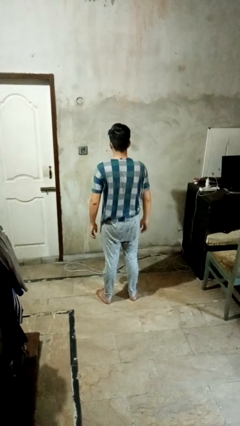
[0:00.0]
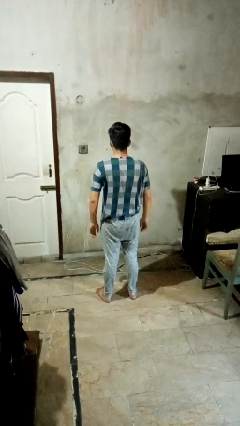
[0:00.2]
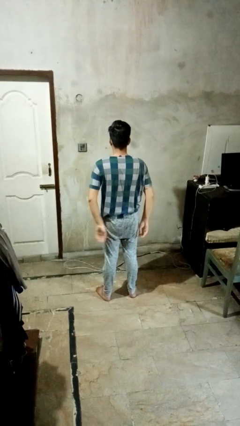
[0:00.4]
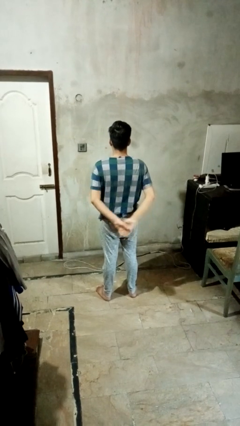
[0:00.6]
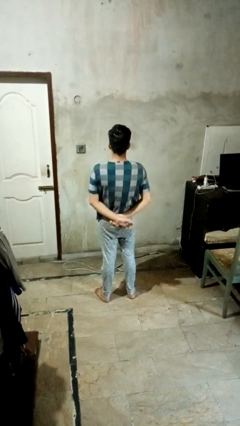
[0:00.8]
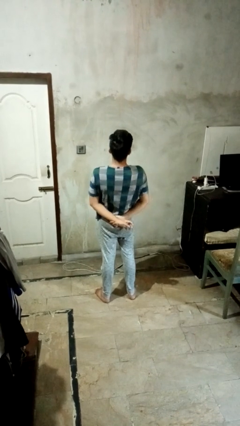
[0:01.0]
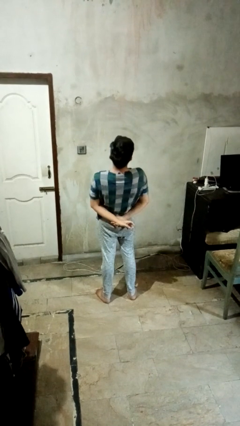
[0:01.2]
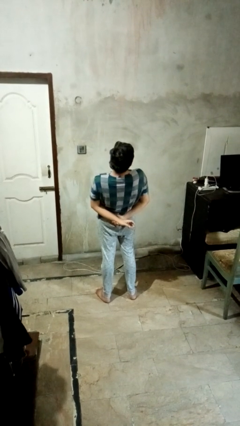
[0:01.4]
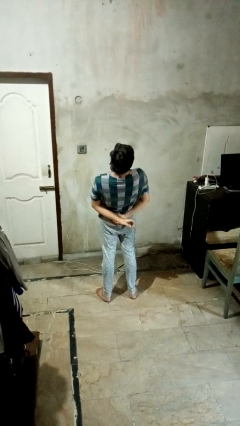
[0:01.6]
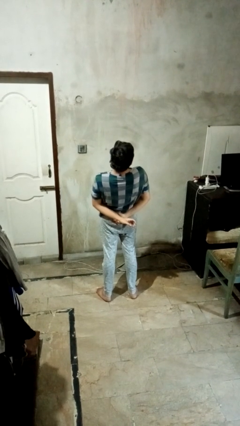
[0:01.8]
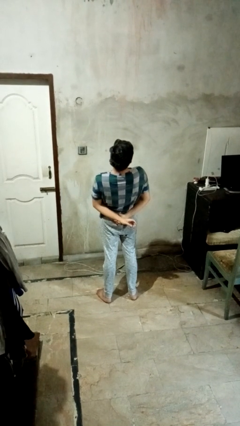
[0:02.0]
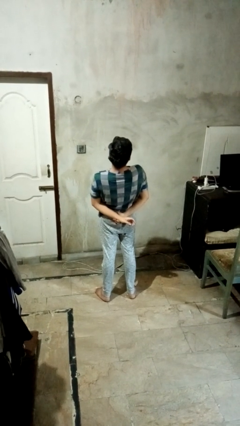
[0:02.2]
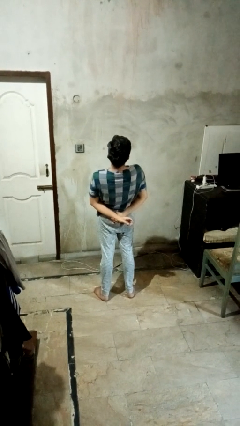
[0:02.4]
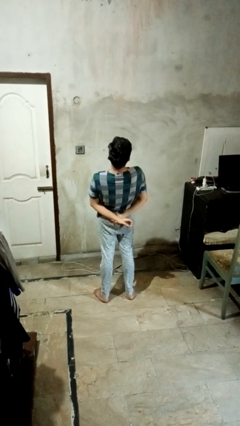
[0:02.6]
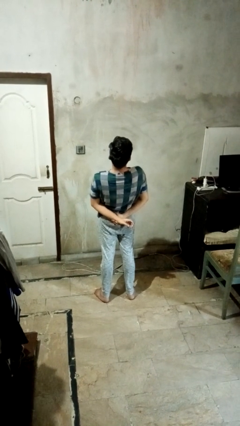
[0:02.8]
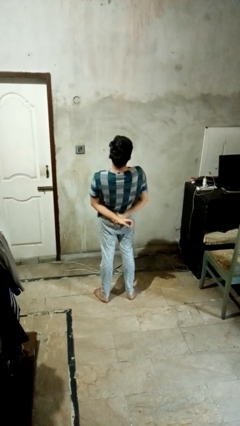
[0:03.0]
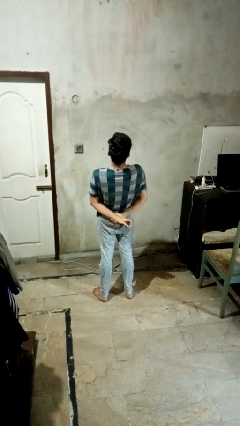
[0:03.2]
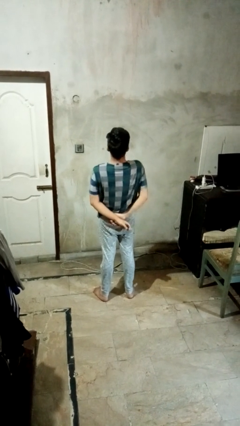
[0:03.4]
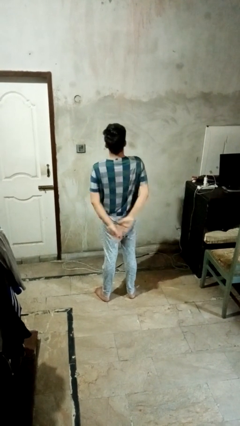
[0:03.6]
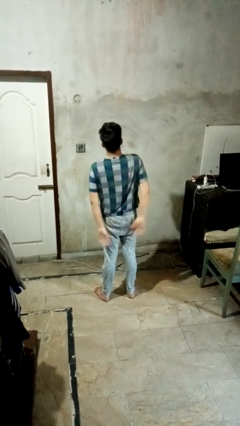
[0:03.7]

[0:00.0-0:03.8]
person stretches back

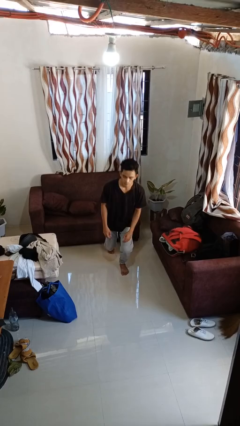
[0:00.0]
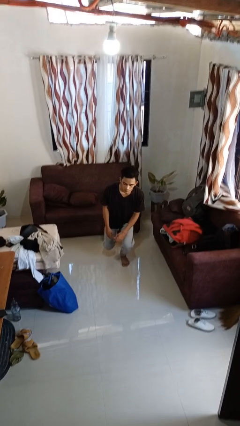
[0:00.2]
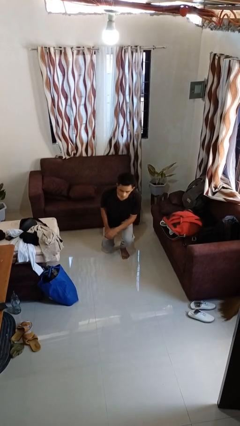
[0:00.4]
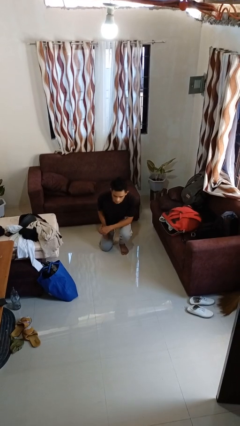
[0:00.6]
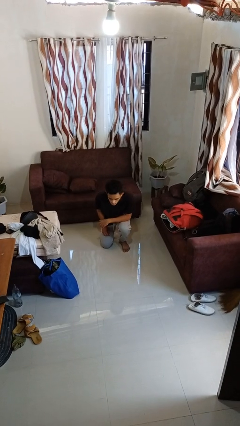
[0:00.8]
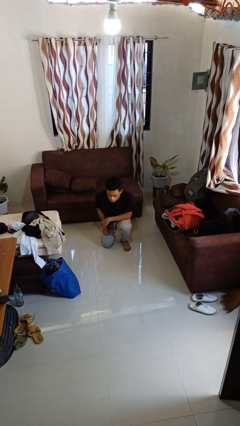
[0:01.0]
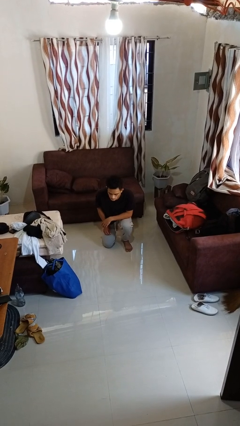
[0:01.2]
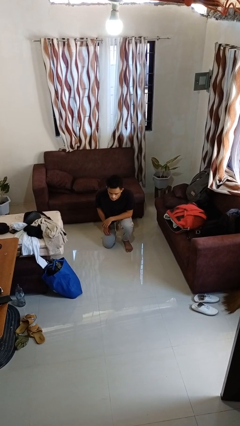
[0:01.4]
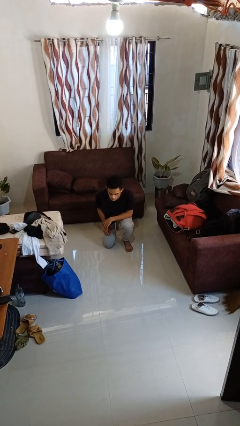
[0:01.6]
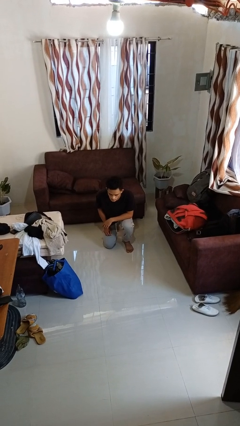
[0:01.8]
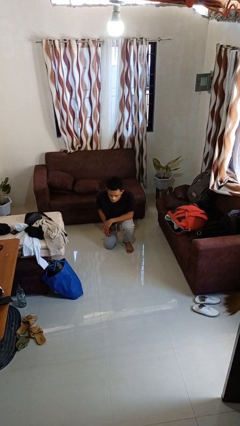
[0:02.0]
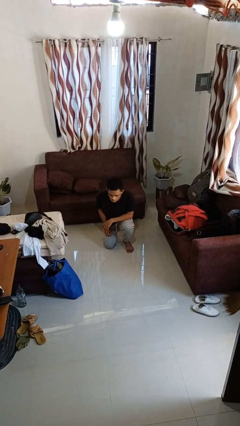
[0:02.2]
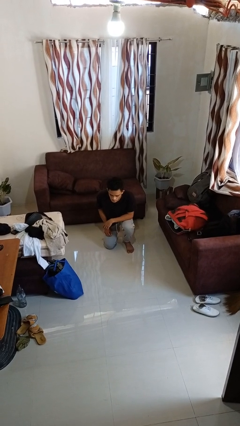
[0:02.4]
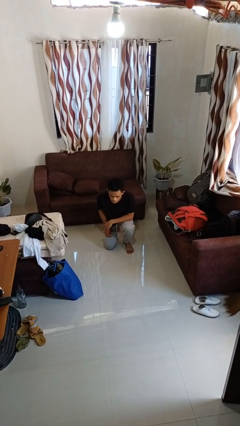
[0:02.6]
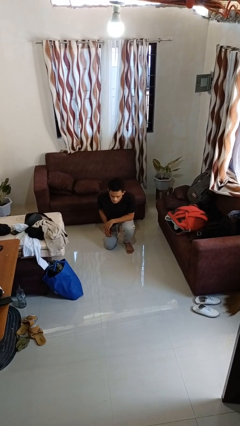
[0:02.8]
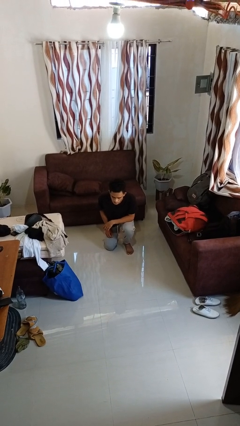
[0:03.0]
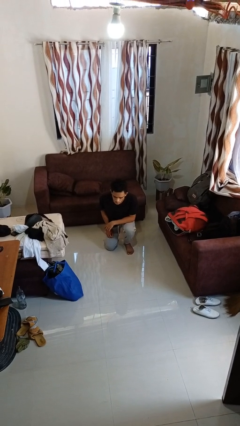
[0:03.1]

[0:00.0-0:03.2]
person kneels

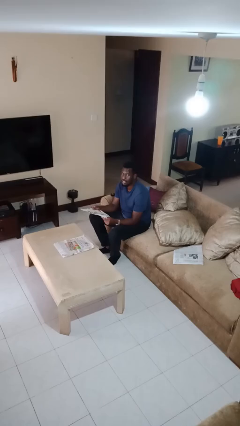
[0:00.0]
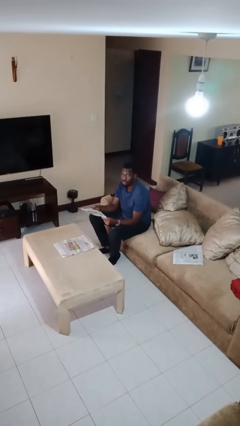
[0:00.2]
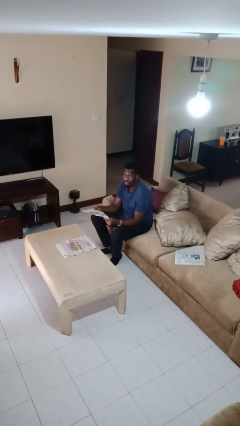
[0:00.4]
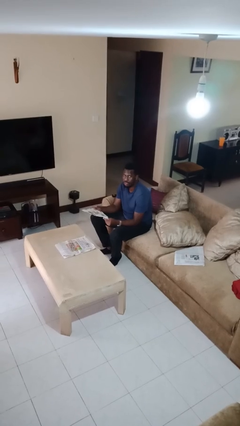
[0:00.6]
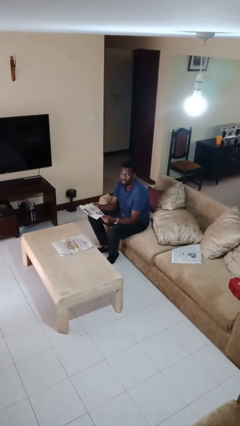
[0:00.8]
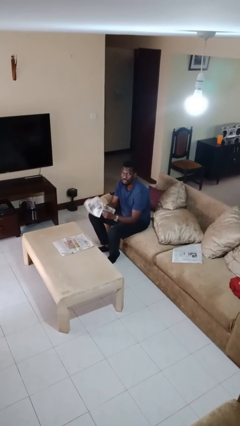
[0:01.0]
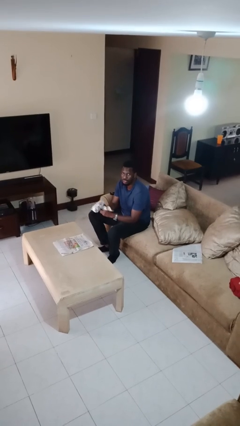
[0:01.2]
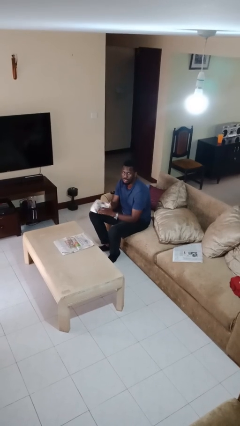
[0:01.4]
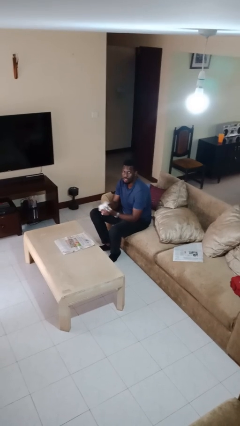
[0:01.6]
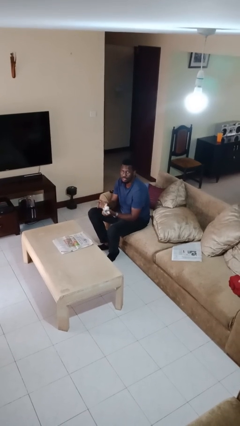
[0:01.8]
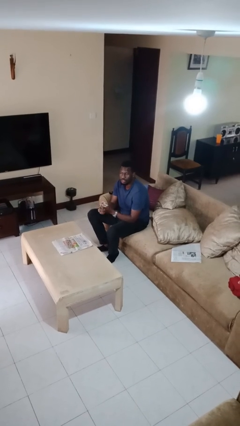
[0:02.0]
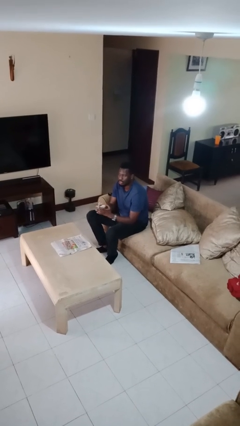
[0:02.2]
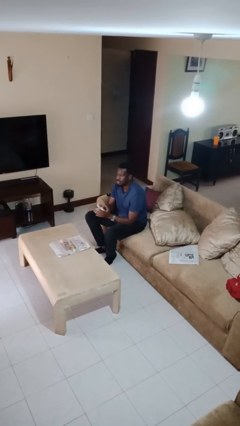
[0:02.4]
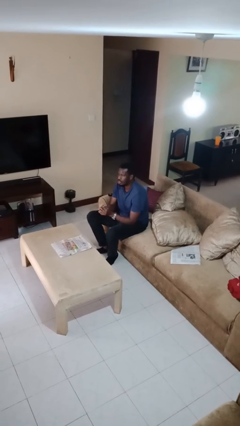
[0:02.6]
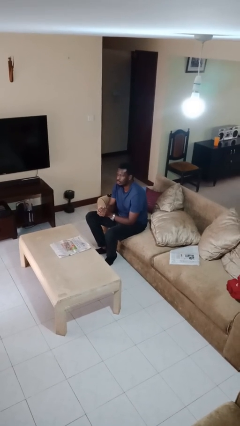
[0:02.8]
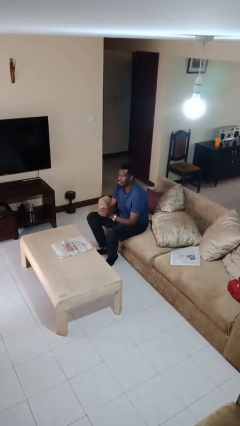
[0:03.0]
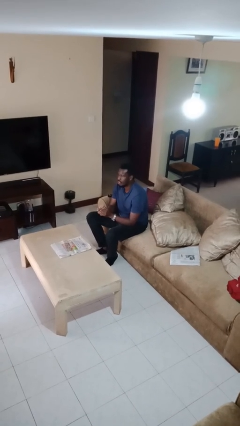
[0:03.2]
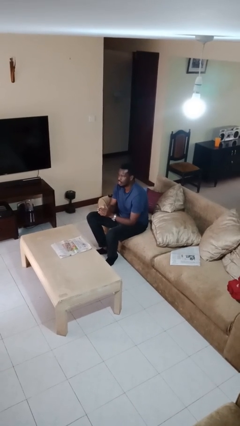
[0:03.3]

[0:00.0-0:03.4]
person crumples paper

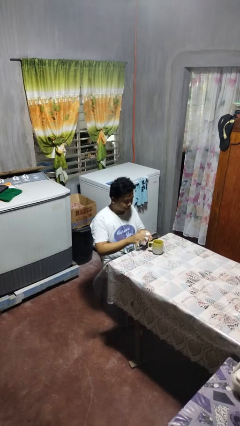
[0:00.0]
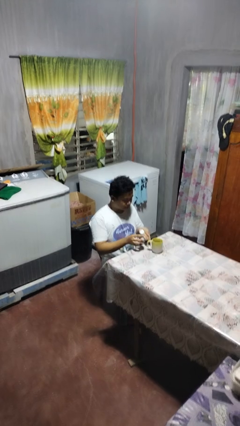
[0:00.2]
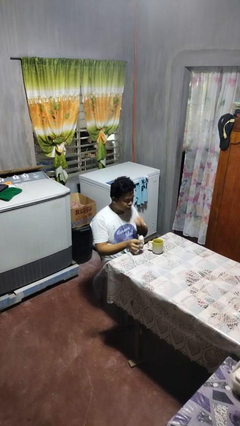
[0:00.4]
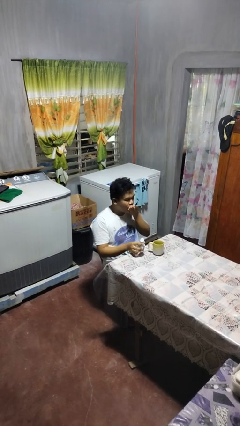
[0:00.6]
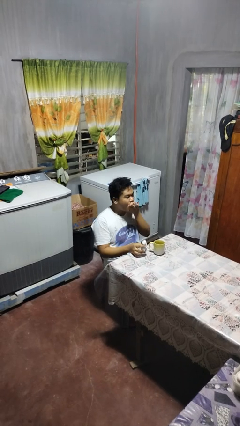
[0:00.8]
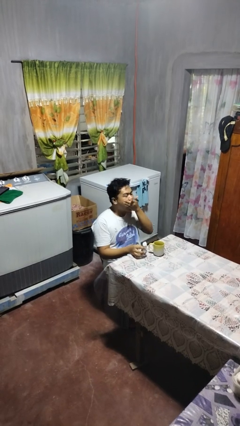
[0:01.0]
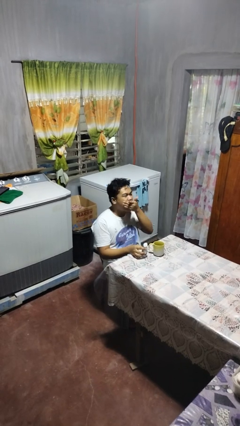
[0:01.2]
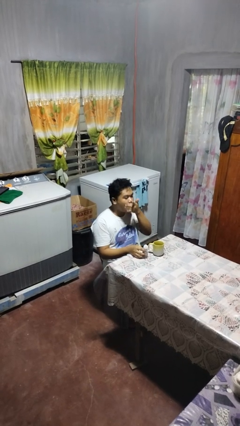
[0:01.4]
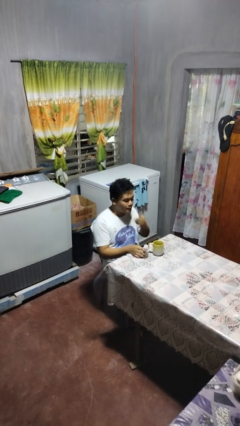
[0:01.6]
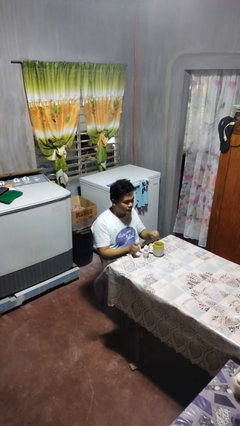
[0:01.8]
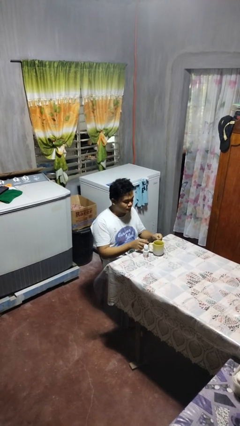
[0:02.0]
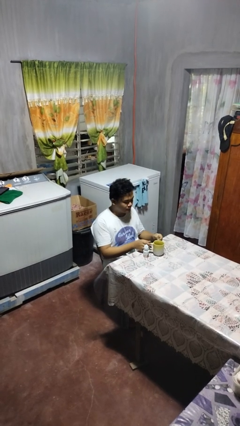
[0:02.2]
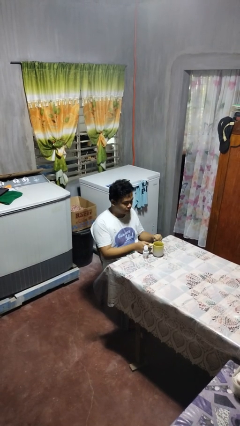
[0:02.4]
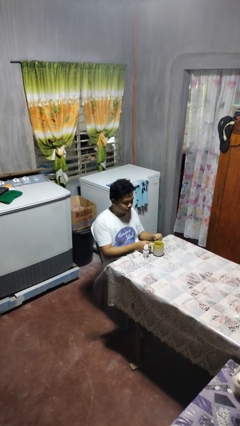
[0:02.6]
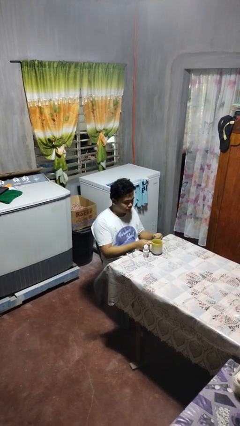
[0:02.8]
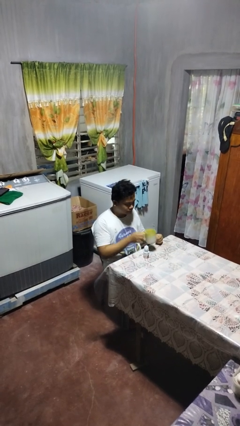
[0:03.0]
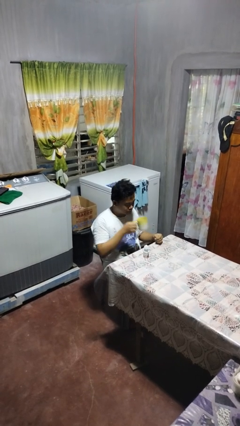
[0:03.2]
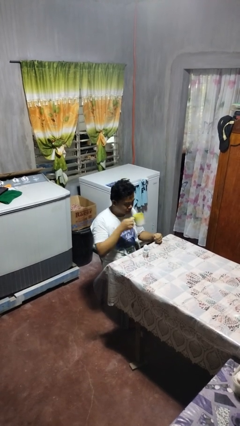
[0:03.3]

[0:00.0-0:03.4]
person takes medicine pills

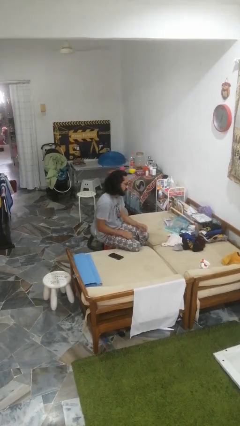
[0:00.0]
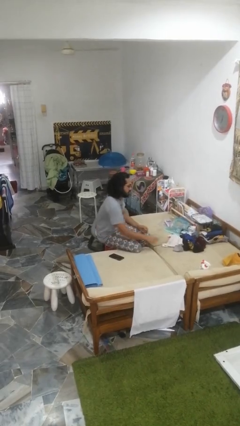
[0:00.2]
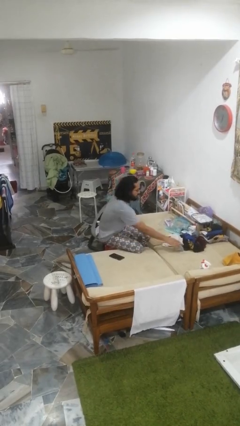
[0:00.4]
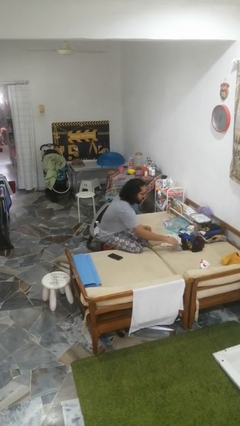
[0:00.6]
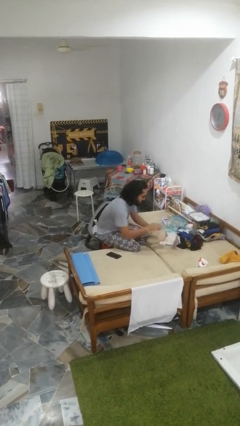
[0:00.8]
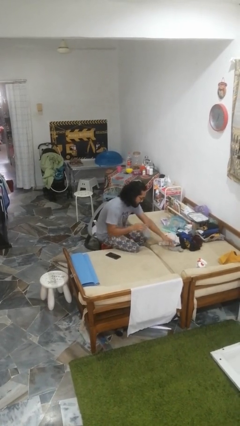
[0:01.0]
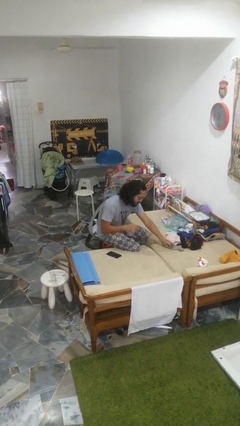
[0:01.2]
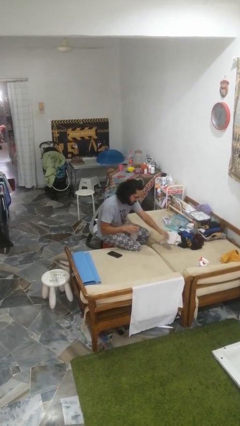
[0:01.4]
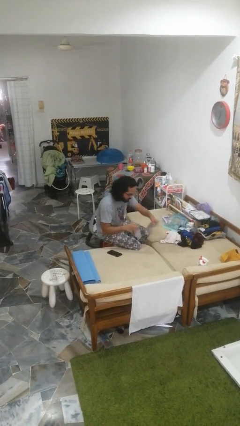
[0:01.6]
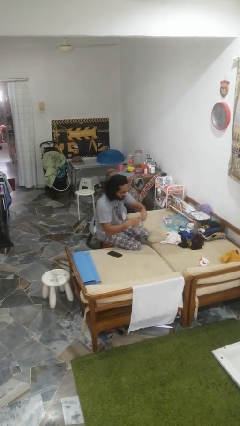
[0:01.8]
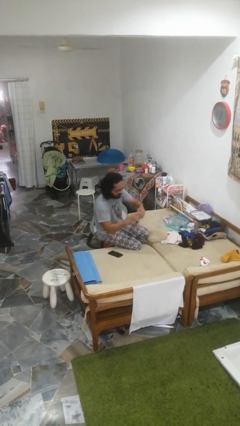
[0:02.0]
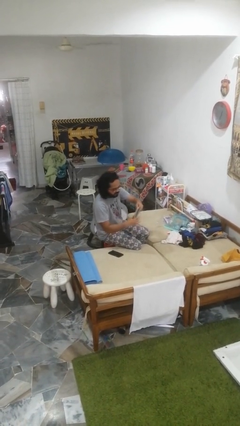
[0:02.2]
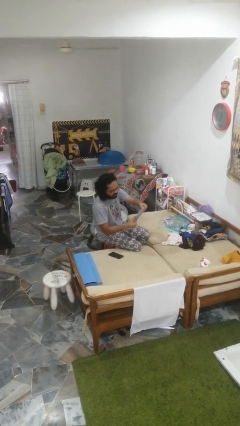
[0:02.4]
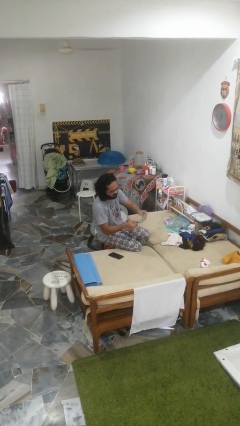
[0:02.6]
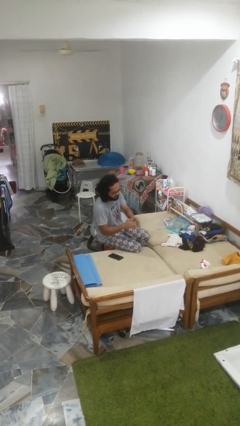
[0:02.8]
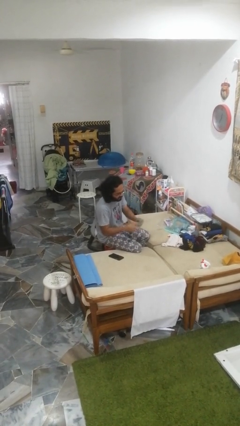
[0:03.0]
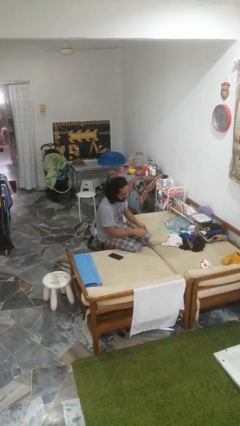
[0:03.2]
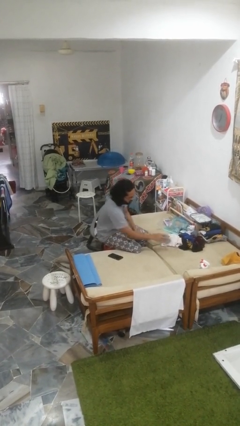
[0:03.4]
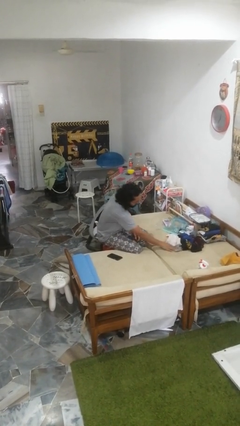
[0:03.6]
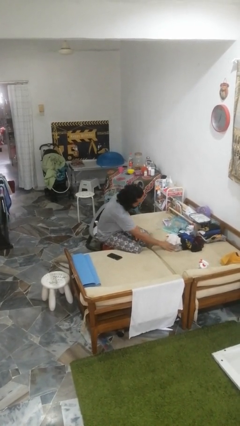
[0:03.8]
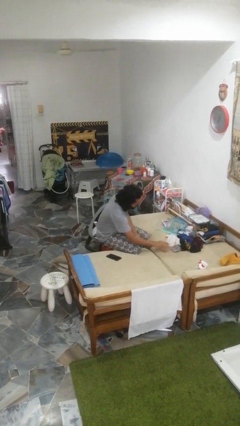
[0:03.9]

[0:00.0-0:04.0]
person folds socks
